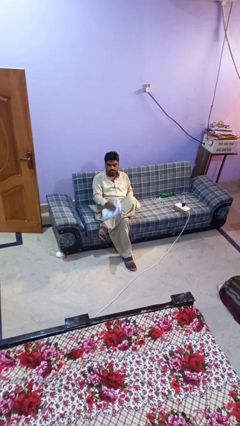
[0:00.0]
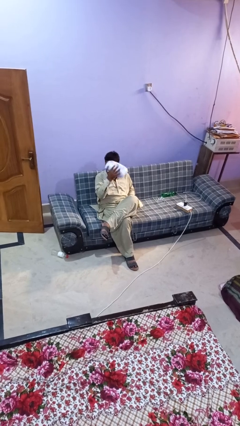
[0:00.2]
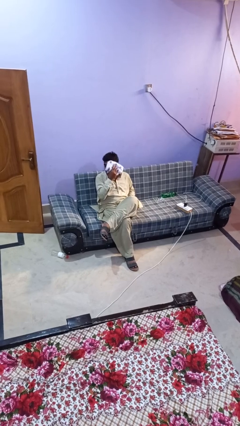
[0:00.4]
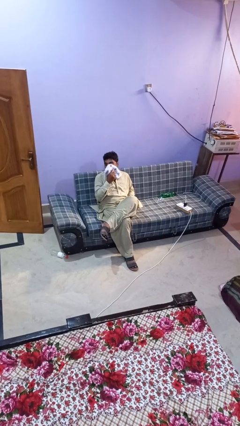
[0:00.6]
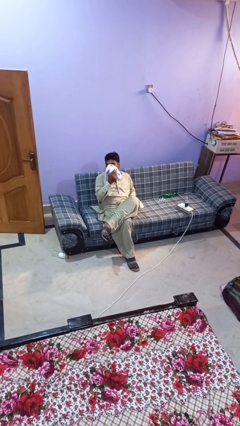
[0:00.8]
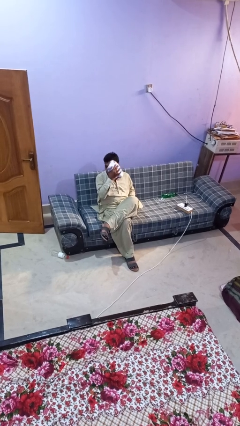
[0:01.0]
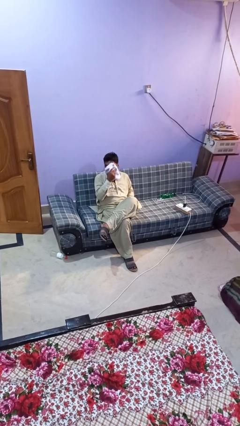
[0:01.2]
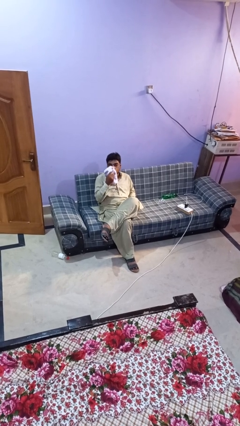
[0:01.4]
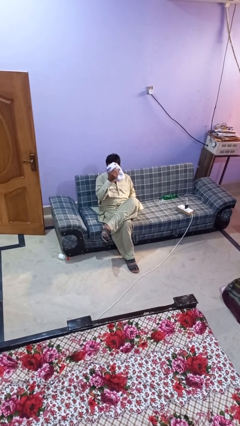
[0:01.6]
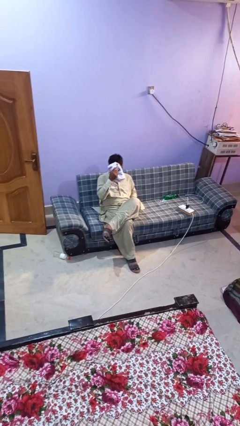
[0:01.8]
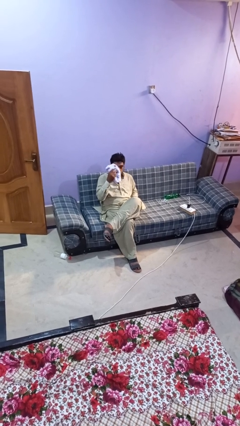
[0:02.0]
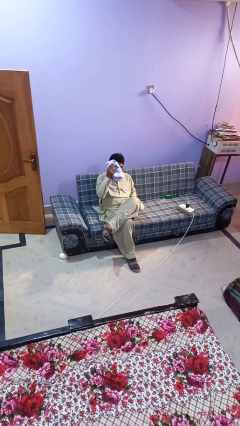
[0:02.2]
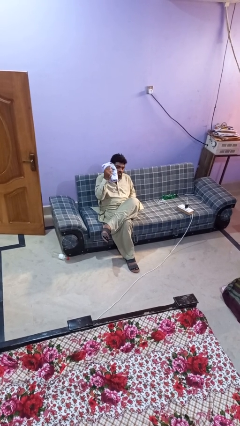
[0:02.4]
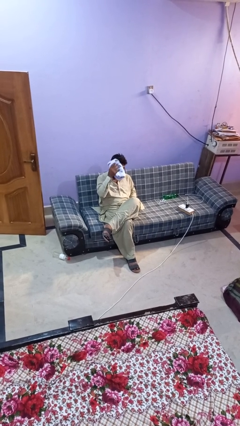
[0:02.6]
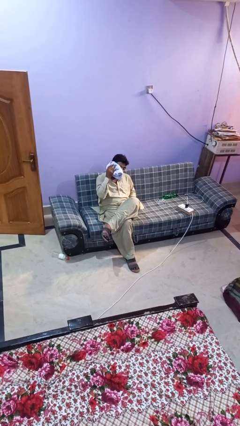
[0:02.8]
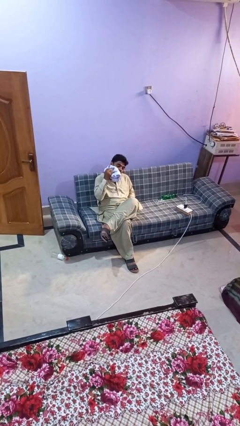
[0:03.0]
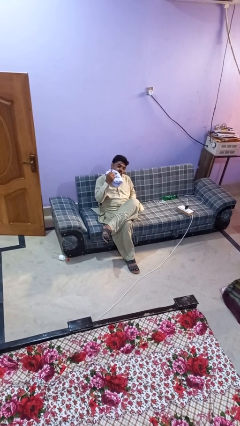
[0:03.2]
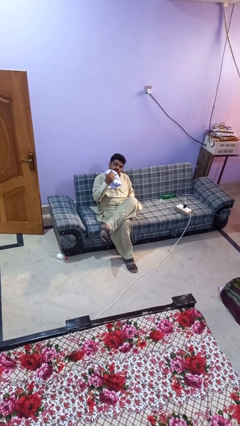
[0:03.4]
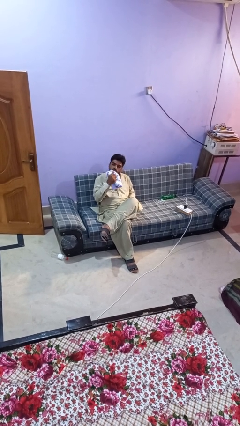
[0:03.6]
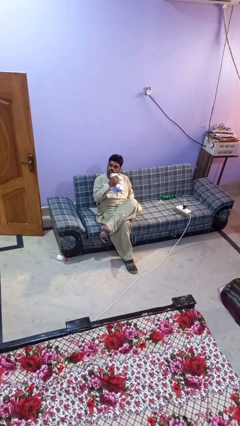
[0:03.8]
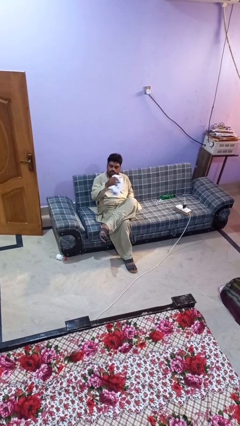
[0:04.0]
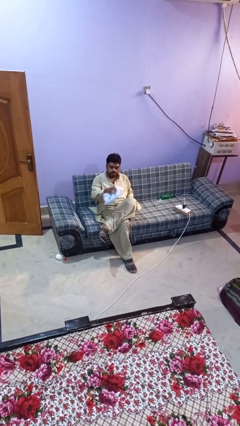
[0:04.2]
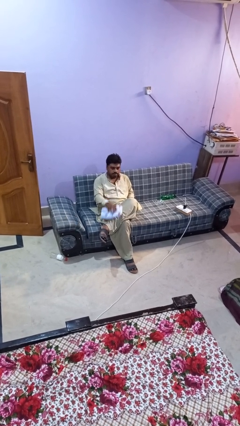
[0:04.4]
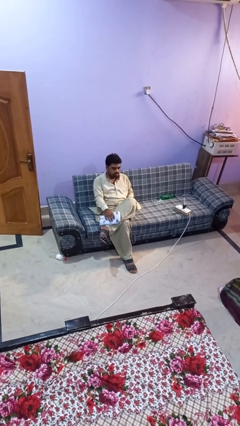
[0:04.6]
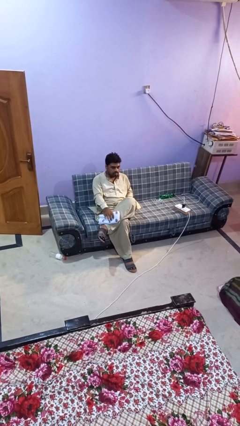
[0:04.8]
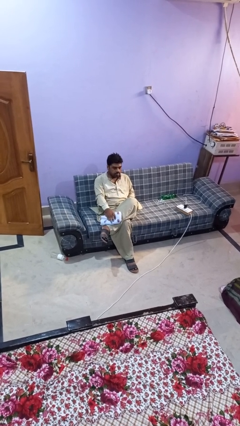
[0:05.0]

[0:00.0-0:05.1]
person wipes mouth with napkin

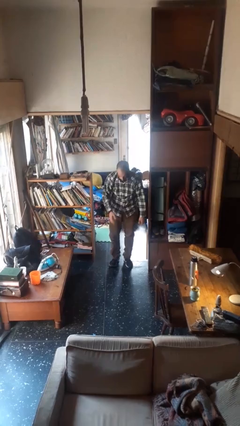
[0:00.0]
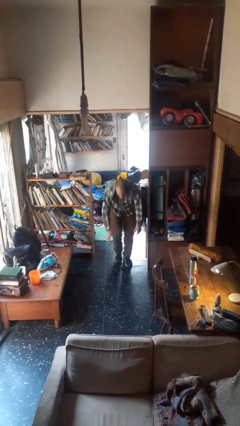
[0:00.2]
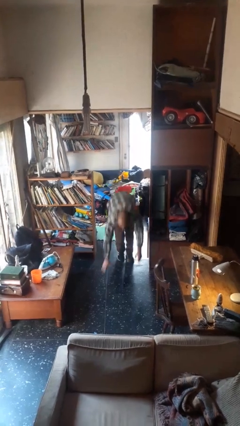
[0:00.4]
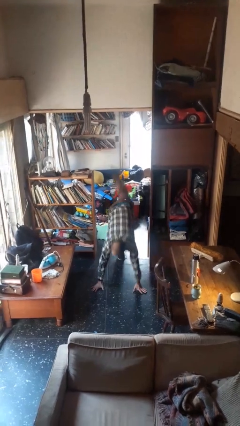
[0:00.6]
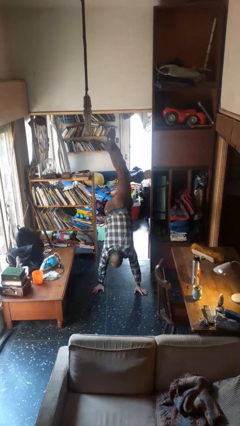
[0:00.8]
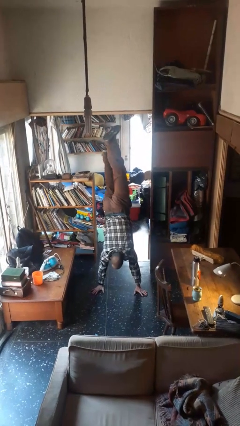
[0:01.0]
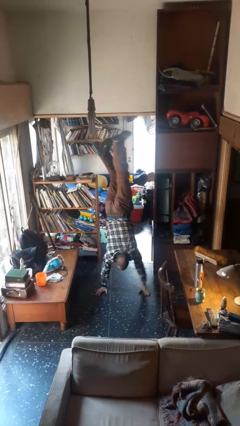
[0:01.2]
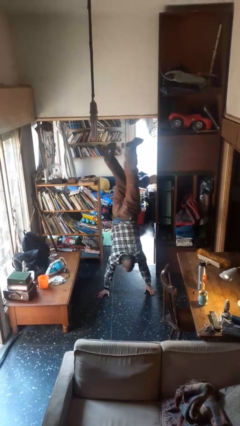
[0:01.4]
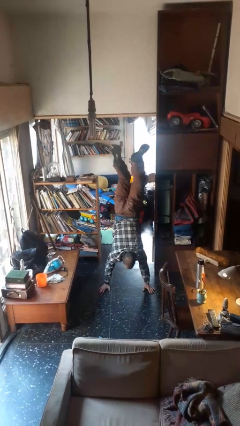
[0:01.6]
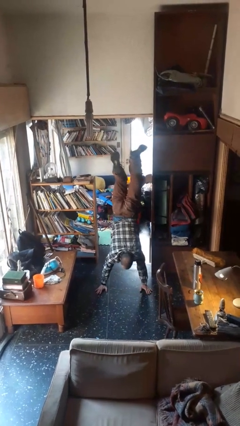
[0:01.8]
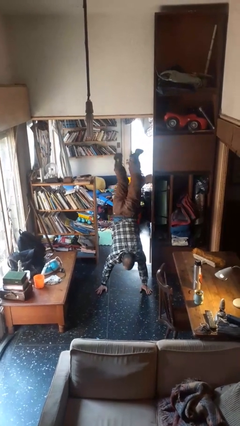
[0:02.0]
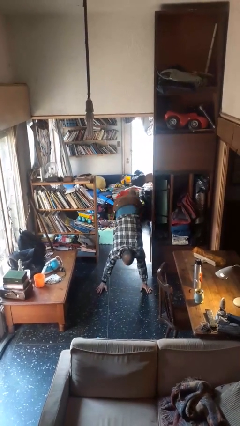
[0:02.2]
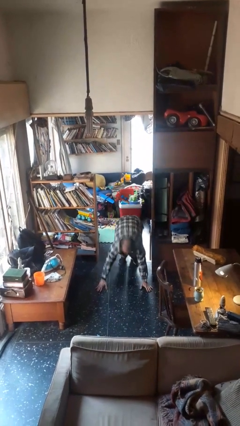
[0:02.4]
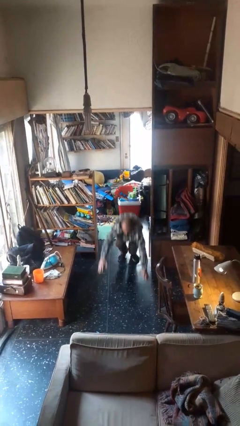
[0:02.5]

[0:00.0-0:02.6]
person handstand

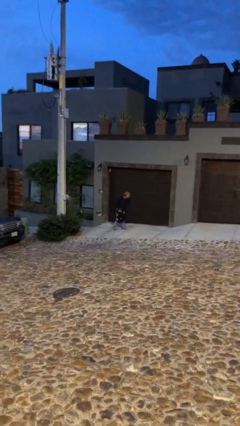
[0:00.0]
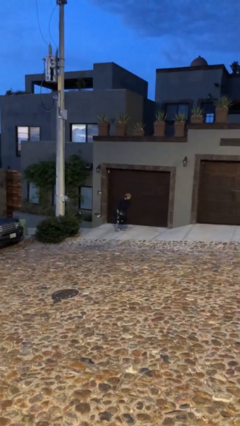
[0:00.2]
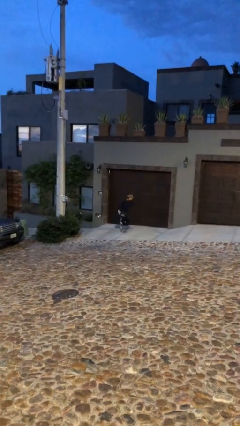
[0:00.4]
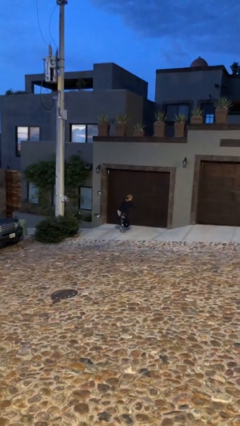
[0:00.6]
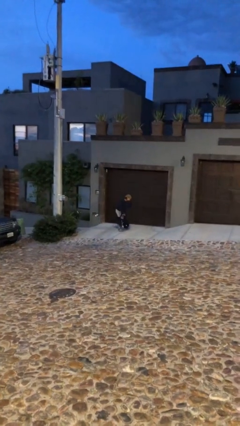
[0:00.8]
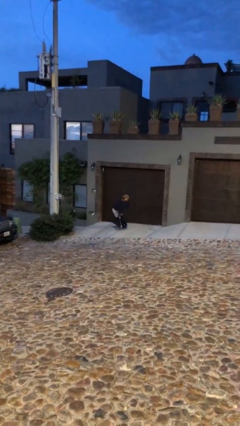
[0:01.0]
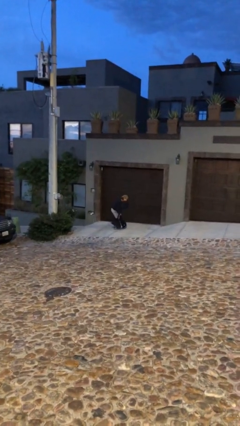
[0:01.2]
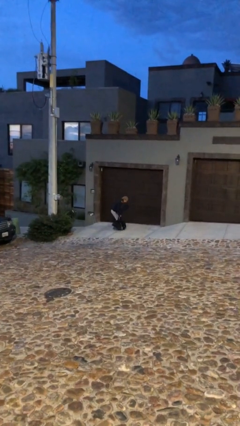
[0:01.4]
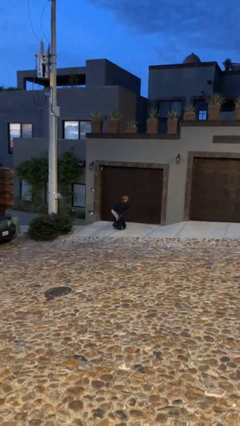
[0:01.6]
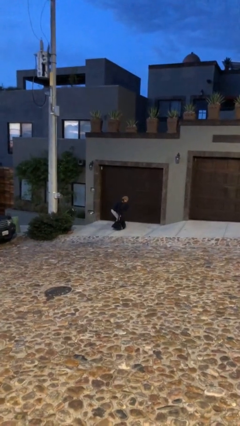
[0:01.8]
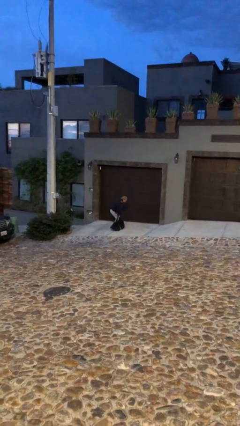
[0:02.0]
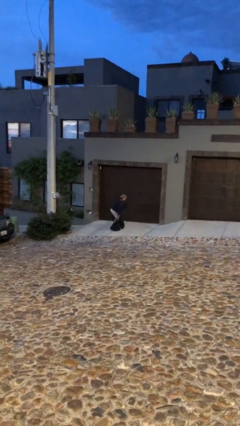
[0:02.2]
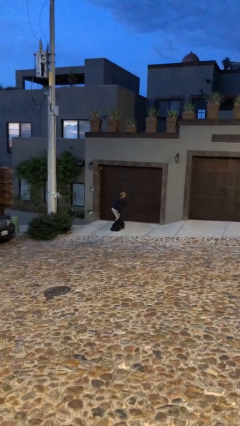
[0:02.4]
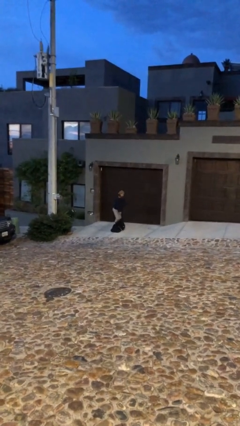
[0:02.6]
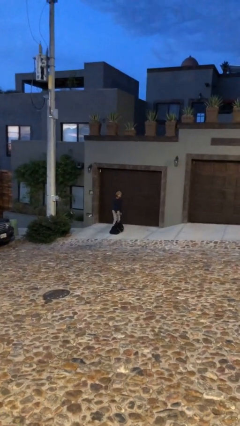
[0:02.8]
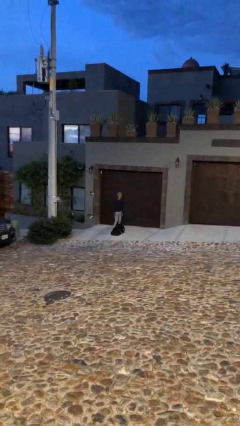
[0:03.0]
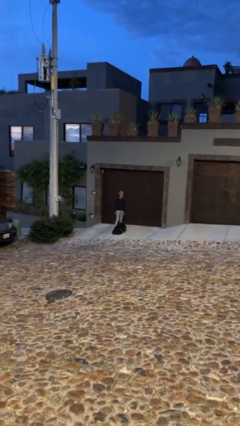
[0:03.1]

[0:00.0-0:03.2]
person puts down object on floor

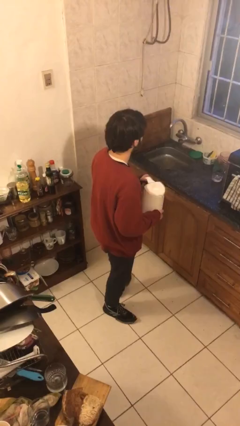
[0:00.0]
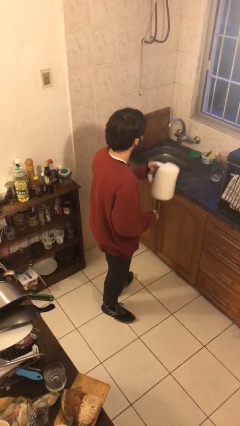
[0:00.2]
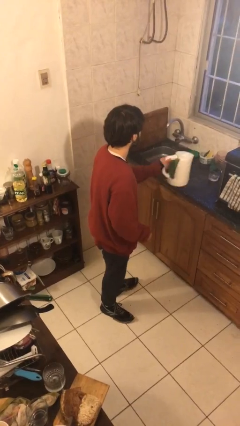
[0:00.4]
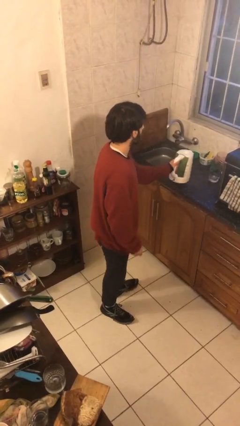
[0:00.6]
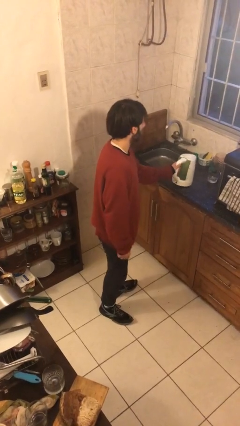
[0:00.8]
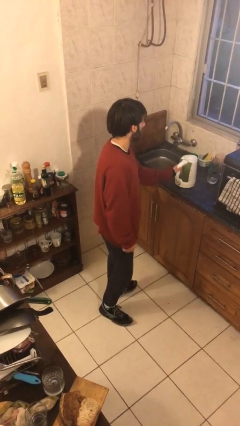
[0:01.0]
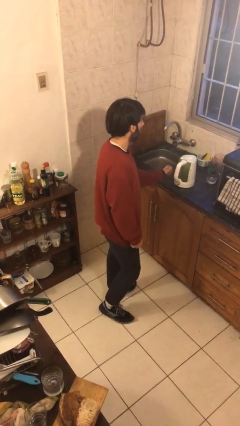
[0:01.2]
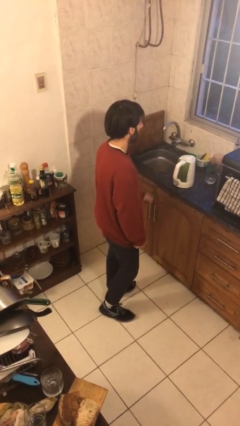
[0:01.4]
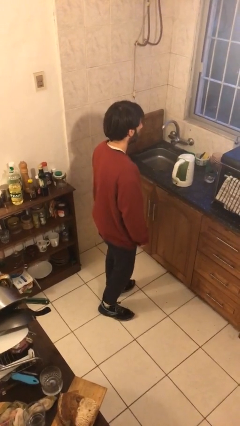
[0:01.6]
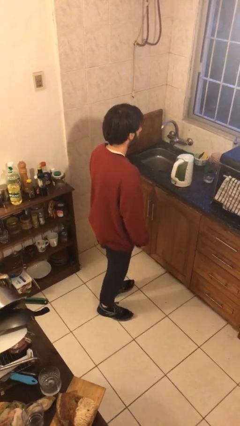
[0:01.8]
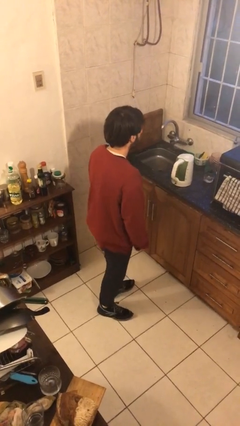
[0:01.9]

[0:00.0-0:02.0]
person puts down object on countertop

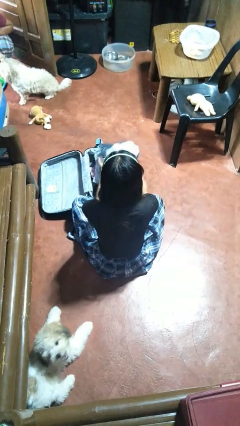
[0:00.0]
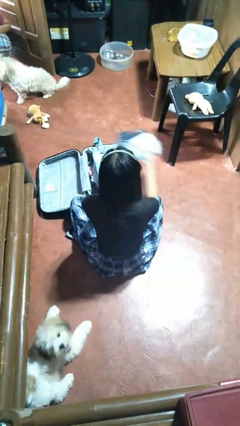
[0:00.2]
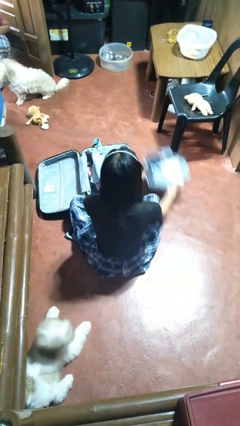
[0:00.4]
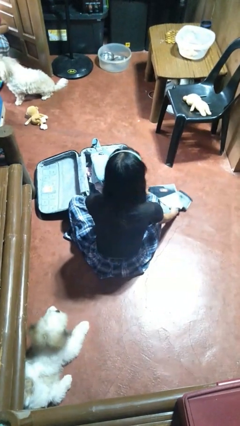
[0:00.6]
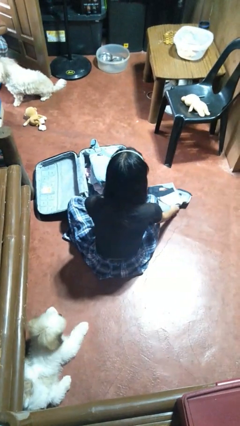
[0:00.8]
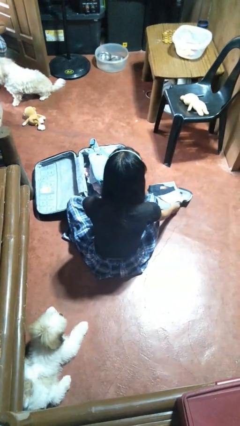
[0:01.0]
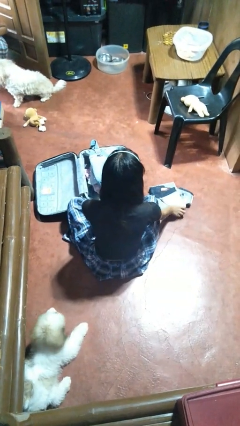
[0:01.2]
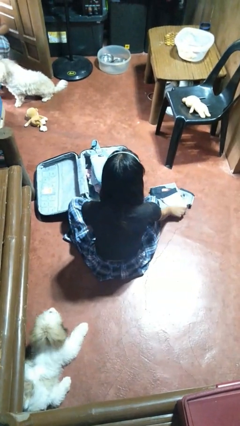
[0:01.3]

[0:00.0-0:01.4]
person unloads clothes from suitcase

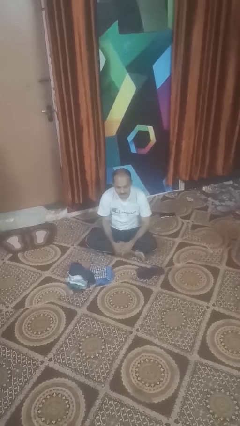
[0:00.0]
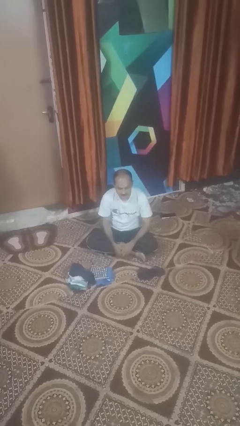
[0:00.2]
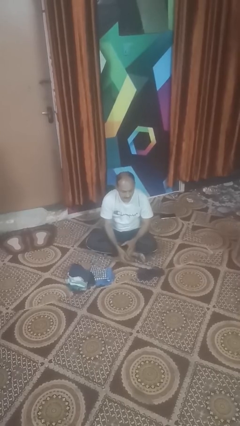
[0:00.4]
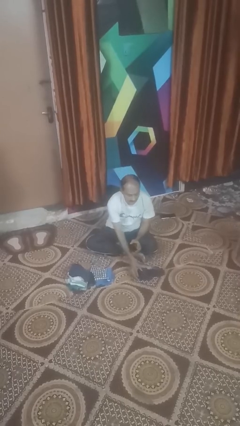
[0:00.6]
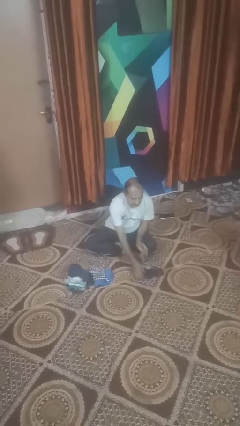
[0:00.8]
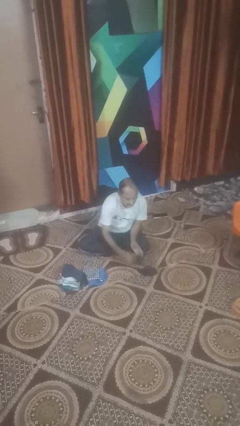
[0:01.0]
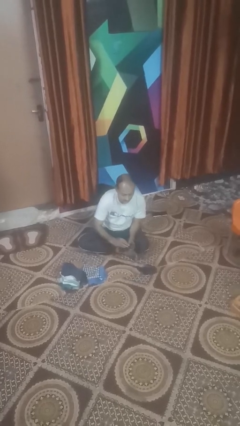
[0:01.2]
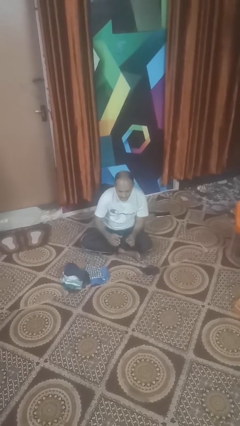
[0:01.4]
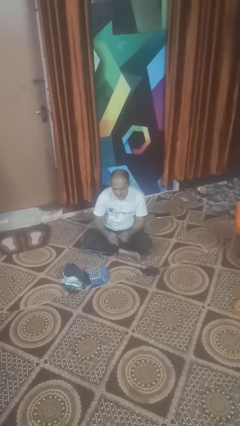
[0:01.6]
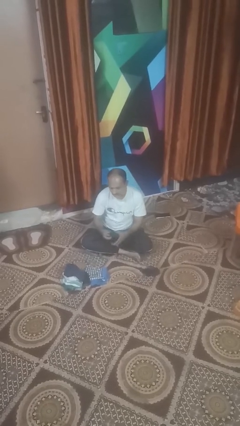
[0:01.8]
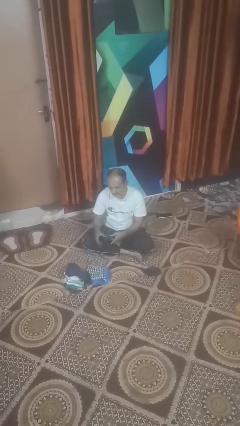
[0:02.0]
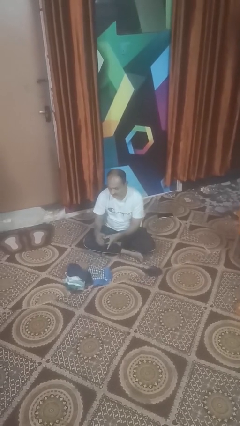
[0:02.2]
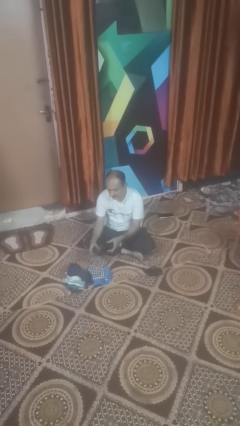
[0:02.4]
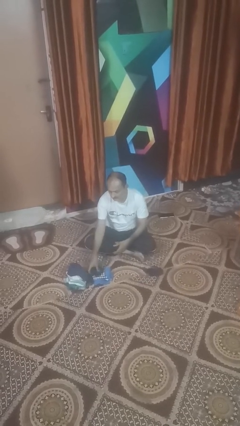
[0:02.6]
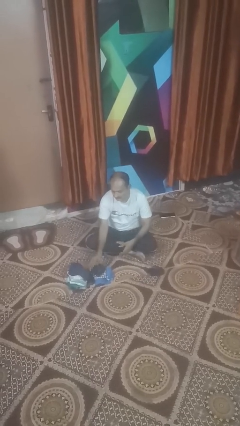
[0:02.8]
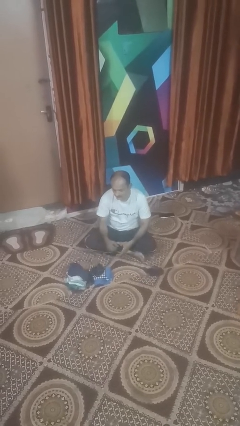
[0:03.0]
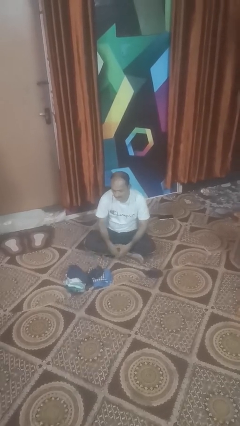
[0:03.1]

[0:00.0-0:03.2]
person folds socks

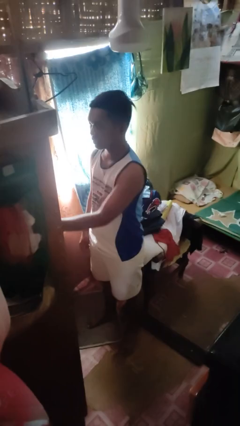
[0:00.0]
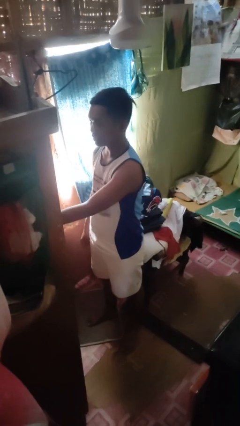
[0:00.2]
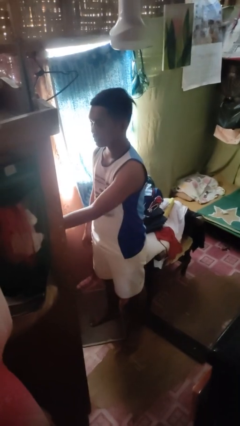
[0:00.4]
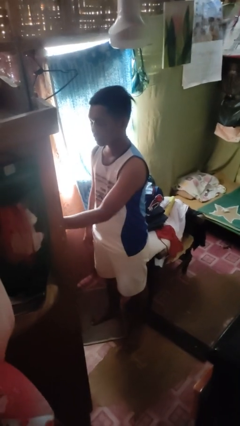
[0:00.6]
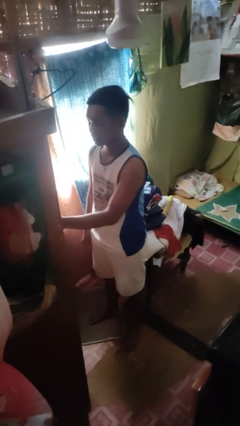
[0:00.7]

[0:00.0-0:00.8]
person opens closet door
